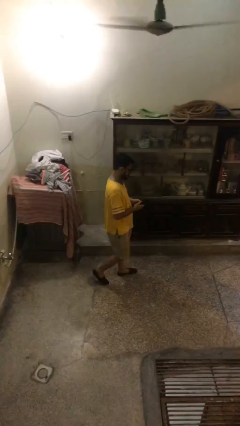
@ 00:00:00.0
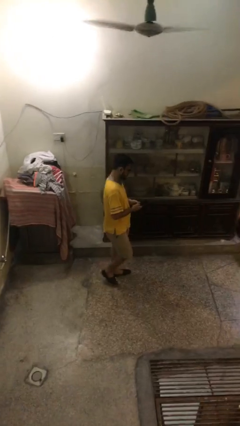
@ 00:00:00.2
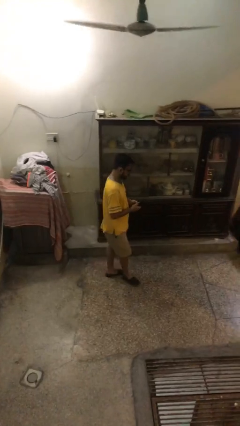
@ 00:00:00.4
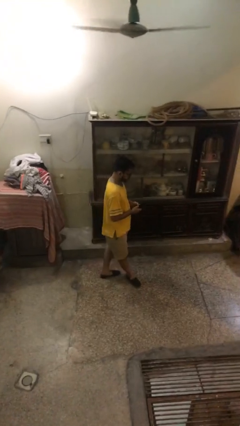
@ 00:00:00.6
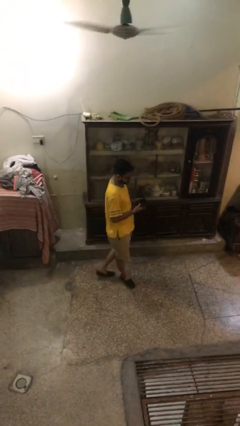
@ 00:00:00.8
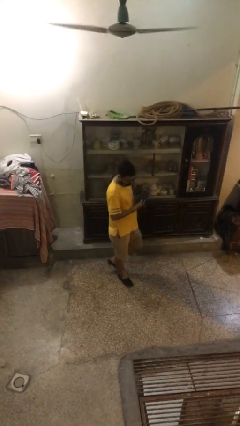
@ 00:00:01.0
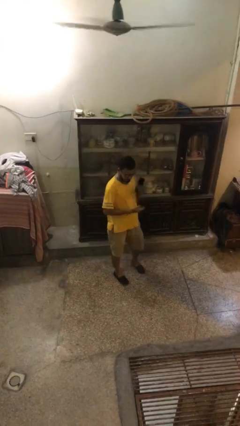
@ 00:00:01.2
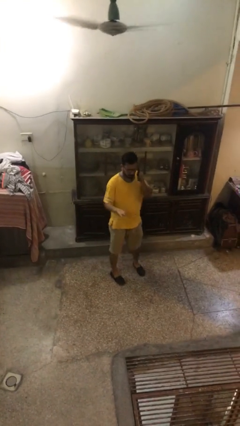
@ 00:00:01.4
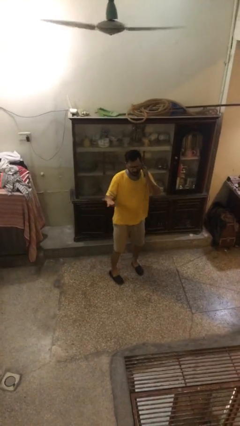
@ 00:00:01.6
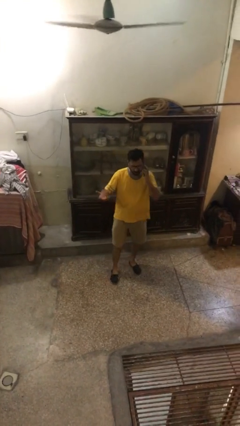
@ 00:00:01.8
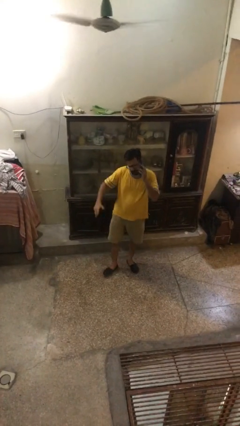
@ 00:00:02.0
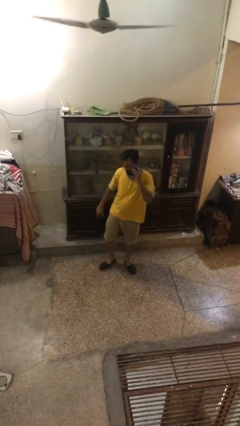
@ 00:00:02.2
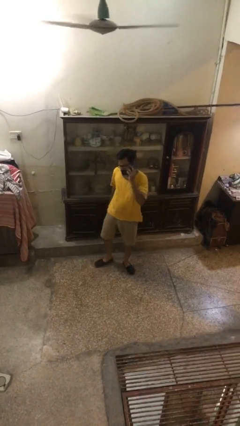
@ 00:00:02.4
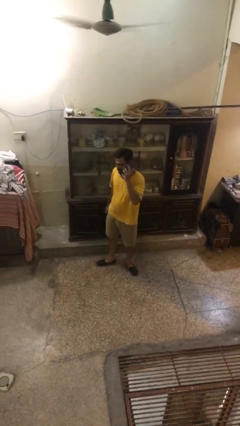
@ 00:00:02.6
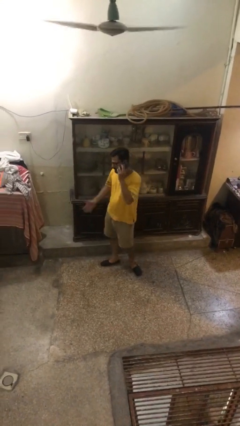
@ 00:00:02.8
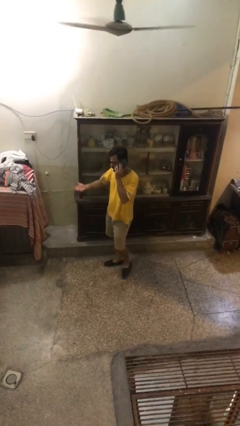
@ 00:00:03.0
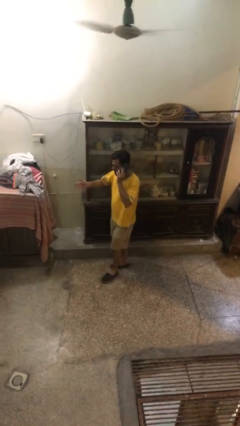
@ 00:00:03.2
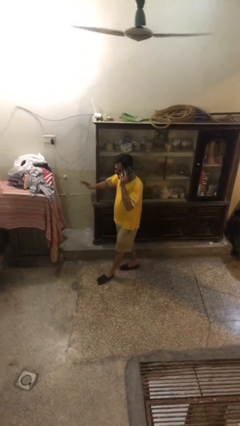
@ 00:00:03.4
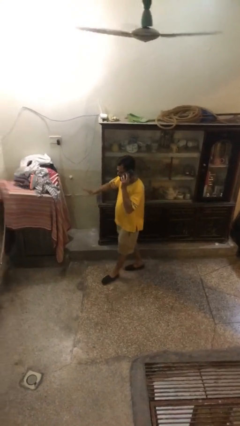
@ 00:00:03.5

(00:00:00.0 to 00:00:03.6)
person talks on phone

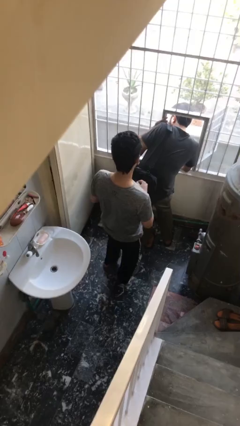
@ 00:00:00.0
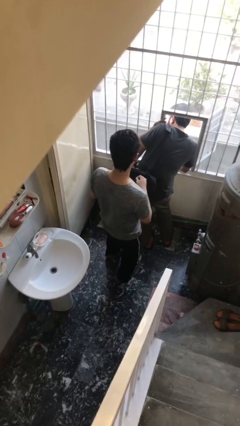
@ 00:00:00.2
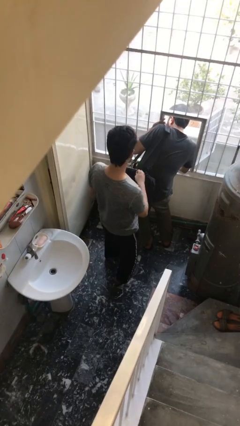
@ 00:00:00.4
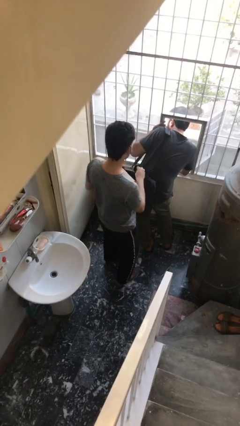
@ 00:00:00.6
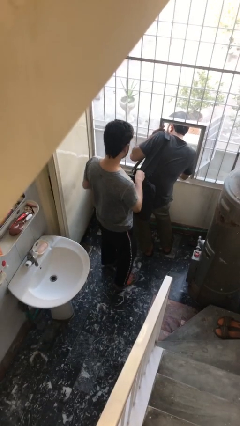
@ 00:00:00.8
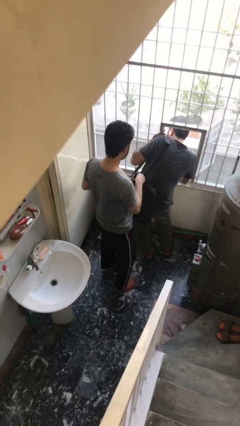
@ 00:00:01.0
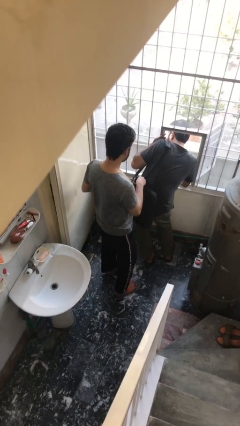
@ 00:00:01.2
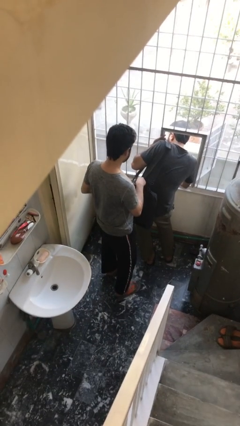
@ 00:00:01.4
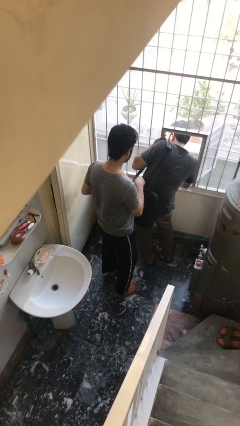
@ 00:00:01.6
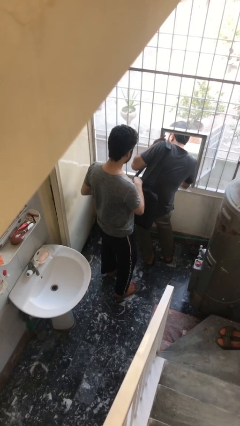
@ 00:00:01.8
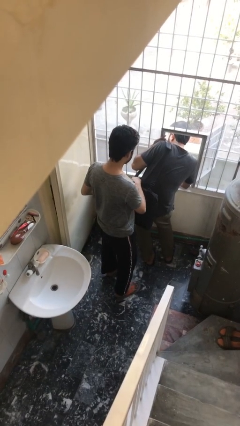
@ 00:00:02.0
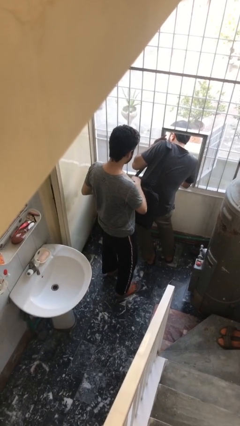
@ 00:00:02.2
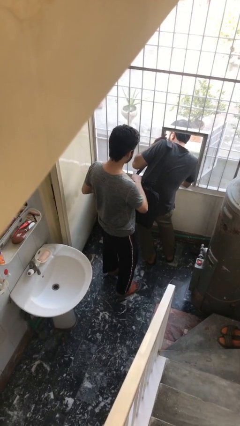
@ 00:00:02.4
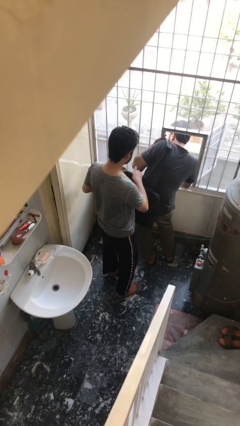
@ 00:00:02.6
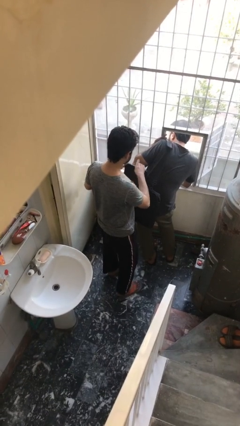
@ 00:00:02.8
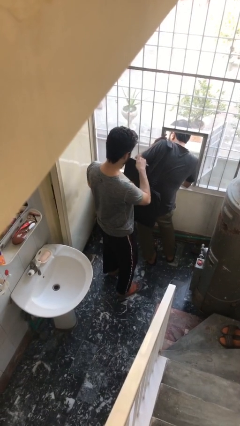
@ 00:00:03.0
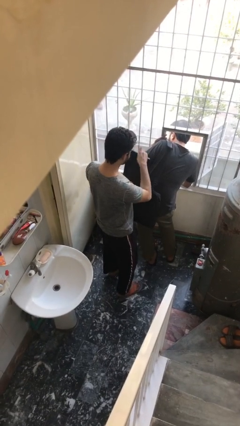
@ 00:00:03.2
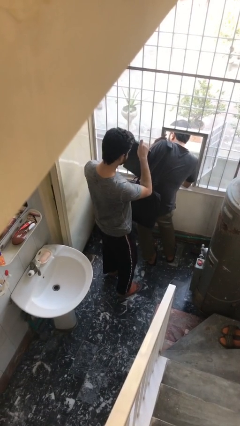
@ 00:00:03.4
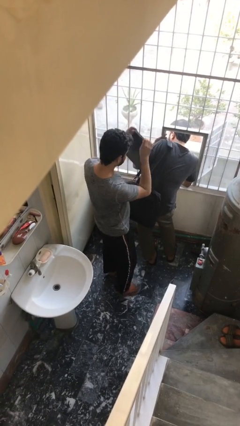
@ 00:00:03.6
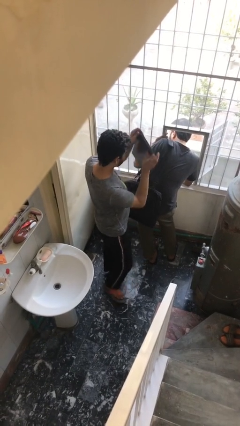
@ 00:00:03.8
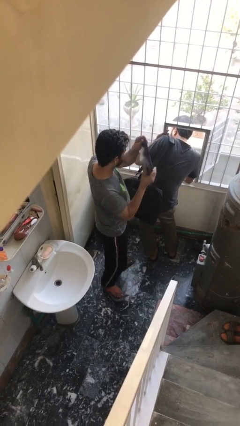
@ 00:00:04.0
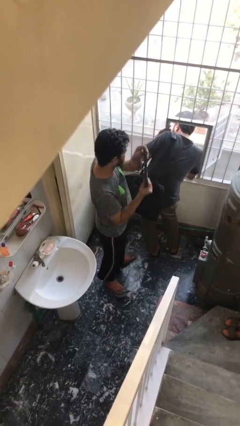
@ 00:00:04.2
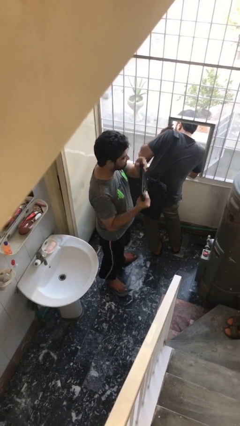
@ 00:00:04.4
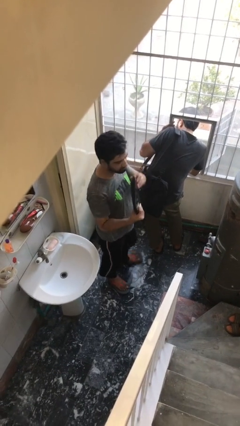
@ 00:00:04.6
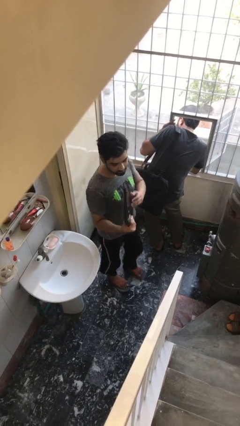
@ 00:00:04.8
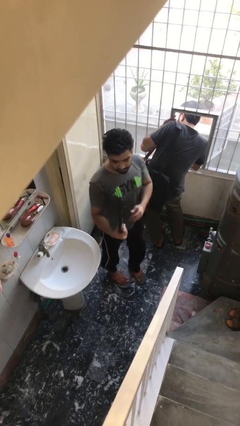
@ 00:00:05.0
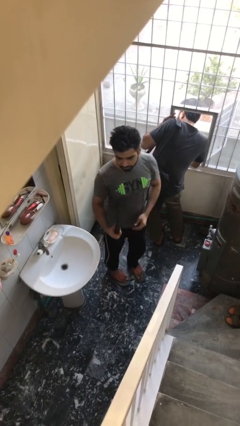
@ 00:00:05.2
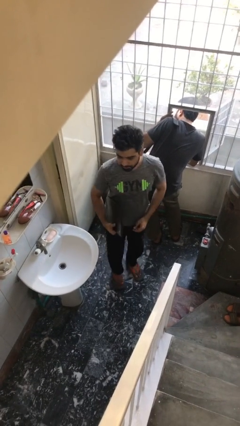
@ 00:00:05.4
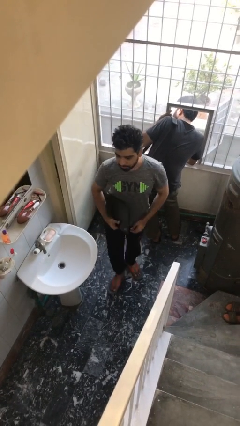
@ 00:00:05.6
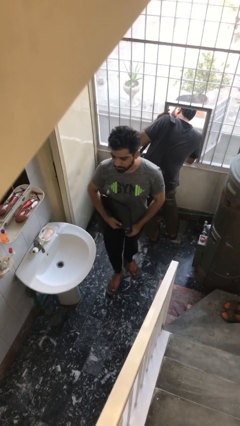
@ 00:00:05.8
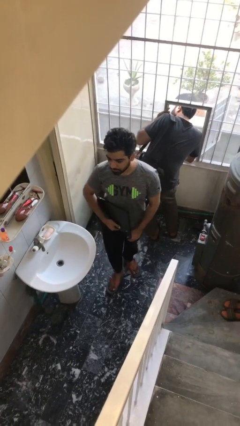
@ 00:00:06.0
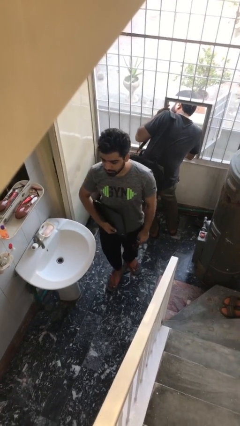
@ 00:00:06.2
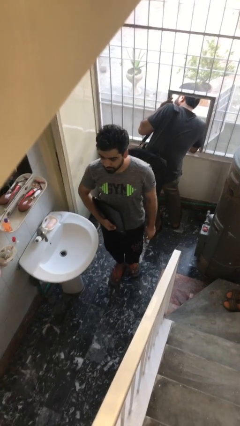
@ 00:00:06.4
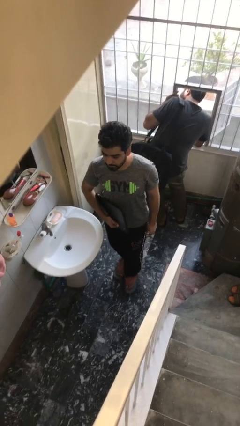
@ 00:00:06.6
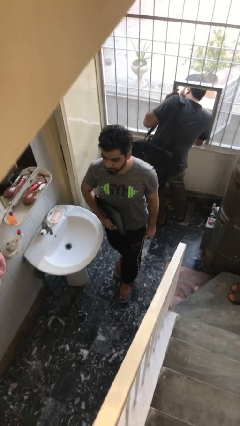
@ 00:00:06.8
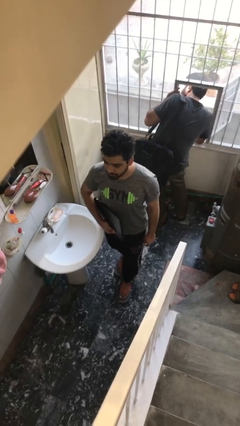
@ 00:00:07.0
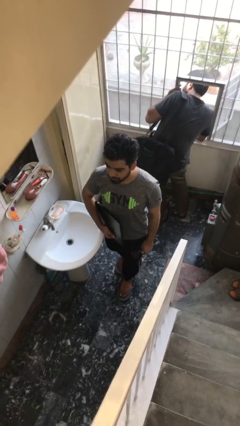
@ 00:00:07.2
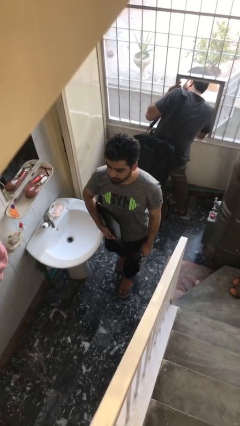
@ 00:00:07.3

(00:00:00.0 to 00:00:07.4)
person steals object from person

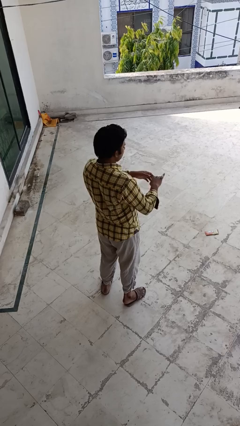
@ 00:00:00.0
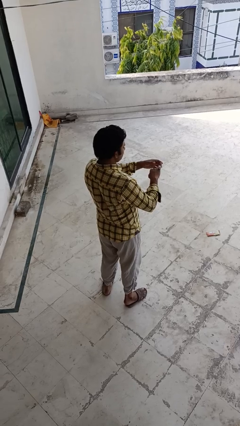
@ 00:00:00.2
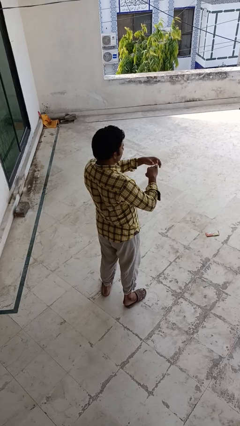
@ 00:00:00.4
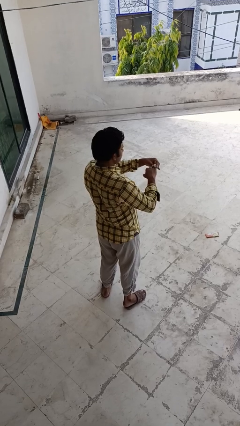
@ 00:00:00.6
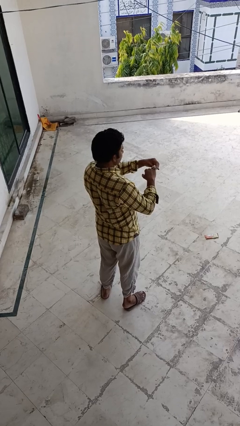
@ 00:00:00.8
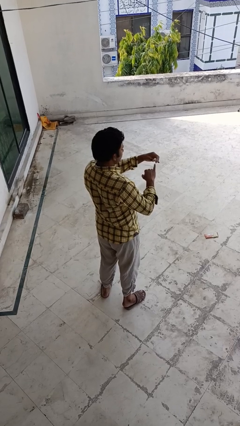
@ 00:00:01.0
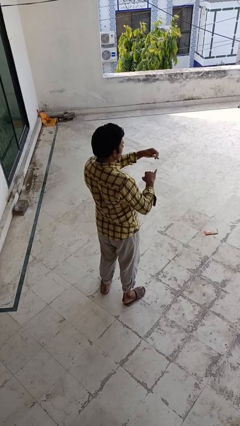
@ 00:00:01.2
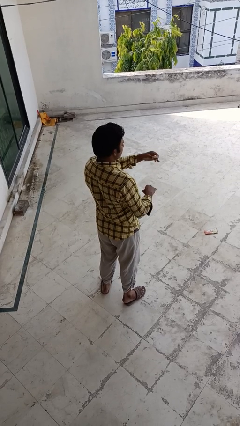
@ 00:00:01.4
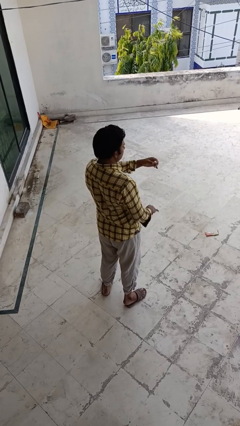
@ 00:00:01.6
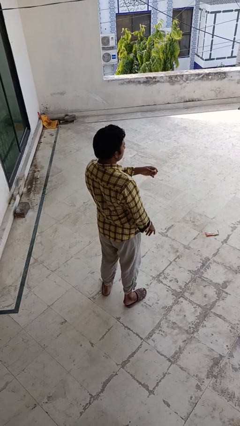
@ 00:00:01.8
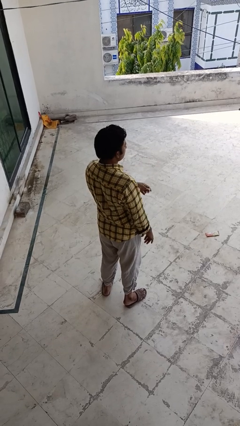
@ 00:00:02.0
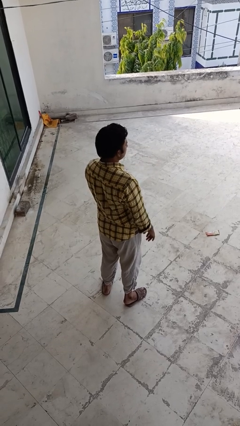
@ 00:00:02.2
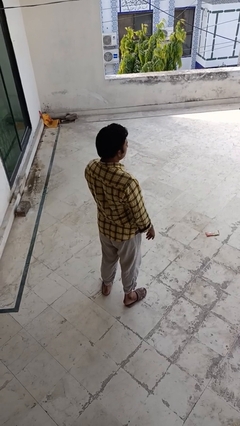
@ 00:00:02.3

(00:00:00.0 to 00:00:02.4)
person takes off ring

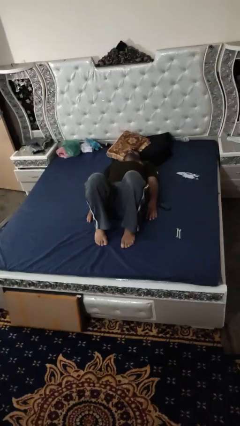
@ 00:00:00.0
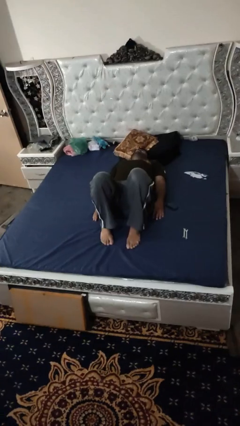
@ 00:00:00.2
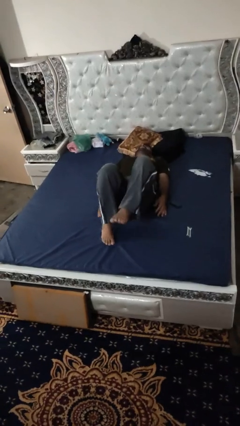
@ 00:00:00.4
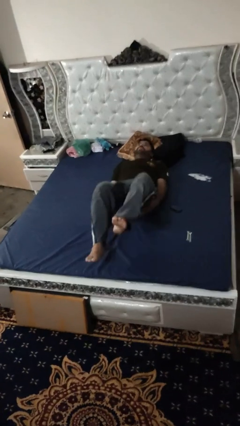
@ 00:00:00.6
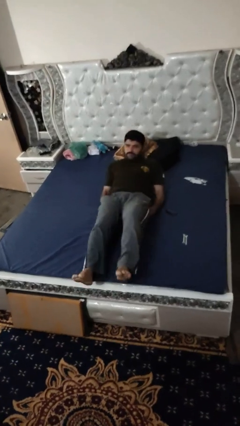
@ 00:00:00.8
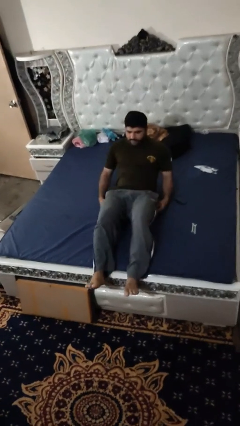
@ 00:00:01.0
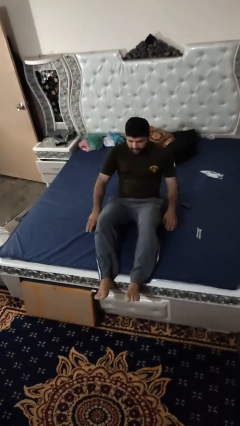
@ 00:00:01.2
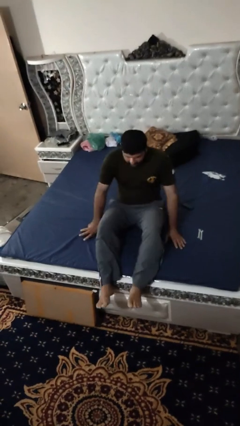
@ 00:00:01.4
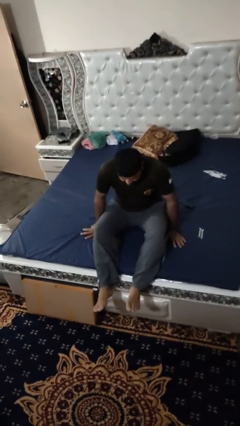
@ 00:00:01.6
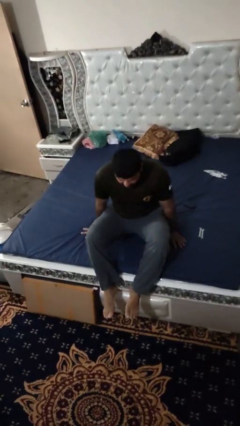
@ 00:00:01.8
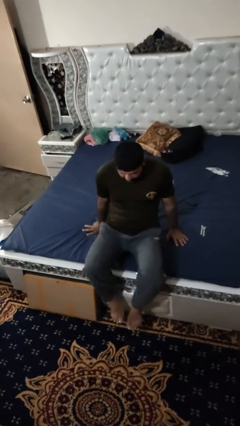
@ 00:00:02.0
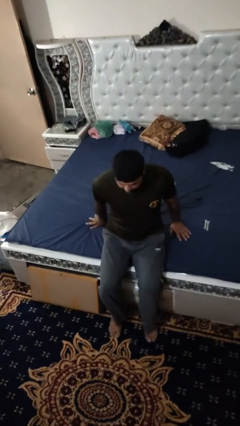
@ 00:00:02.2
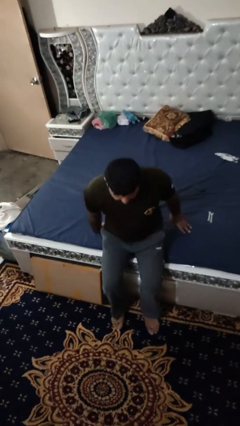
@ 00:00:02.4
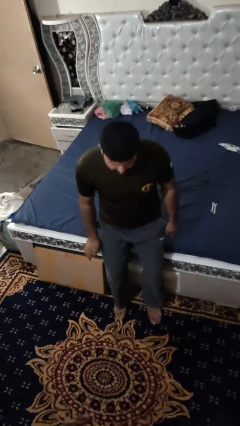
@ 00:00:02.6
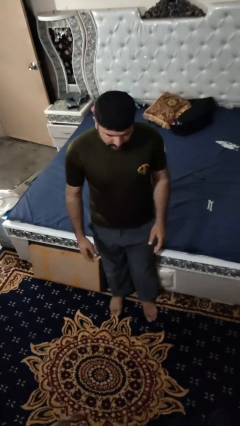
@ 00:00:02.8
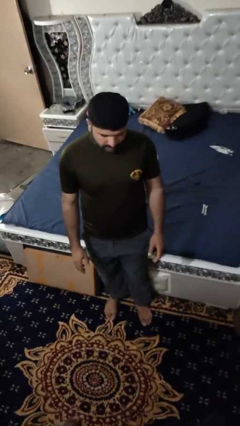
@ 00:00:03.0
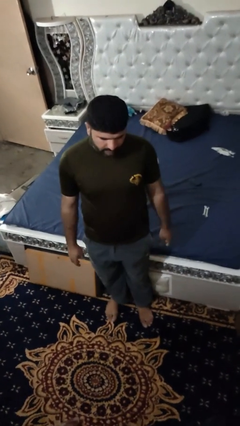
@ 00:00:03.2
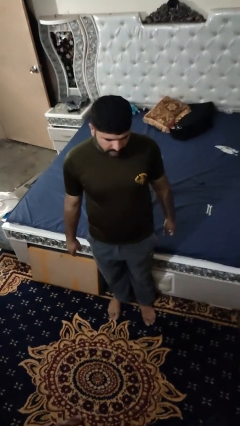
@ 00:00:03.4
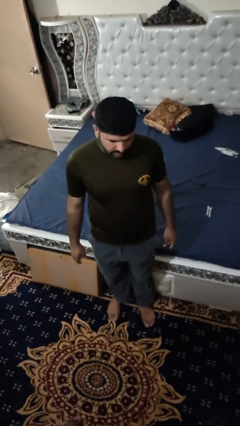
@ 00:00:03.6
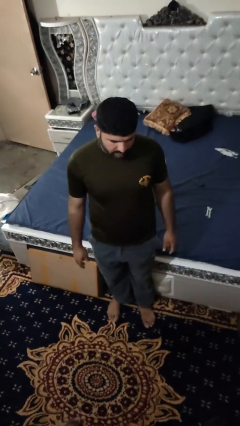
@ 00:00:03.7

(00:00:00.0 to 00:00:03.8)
person stands up

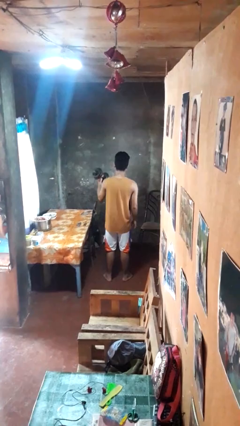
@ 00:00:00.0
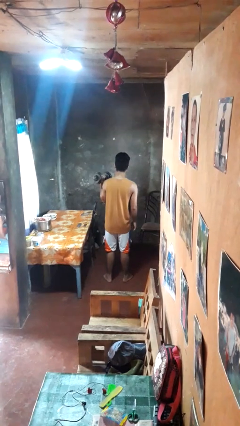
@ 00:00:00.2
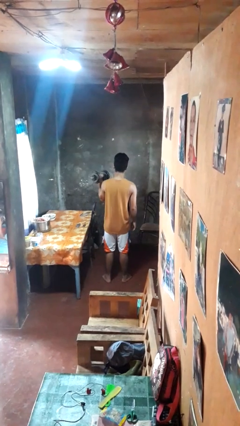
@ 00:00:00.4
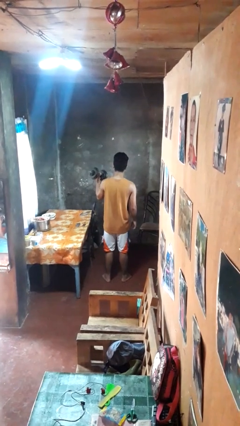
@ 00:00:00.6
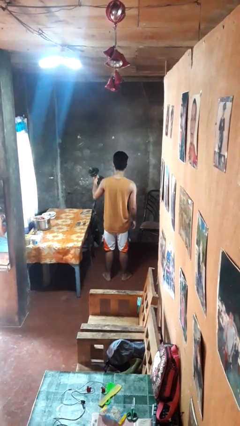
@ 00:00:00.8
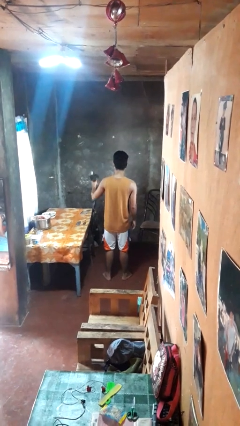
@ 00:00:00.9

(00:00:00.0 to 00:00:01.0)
person lifts dumbbells
